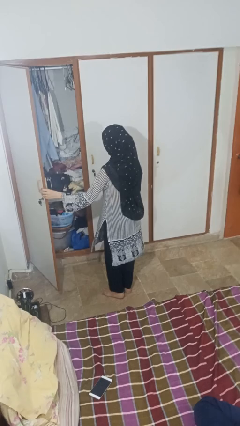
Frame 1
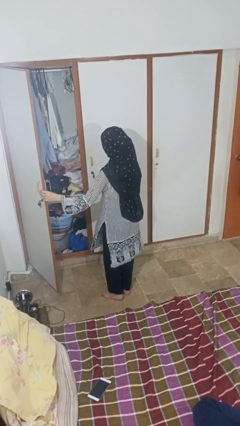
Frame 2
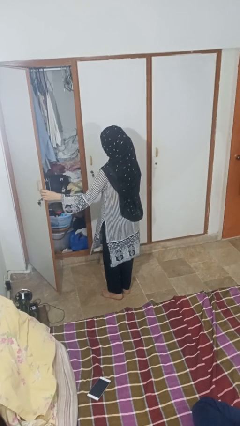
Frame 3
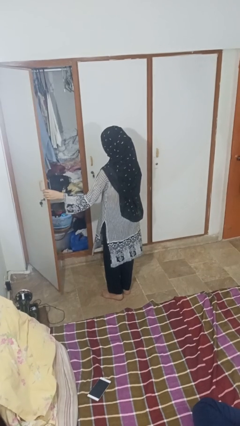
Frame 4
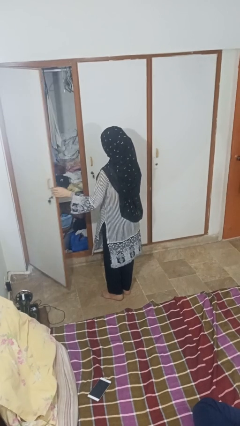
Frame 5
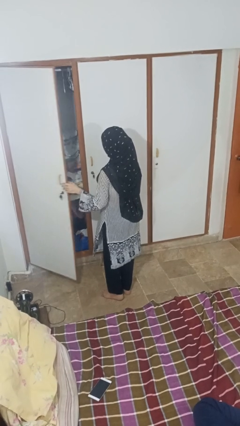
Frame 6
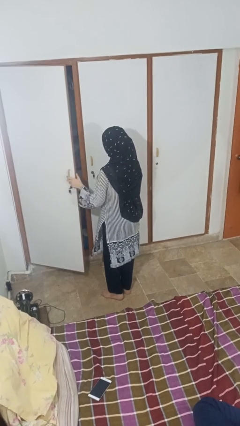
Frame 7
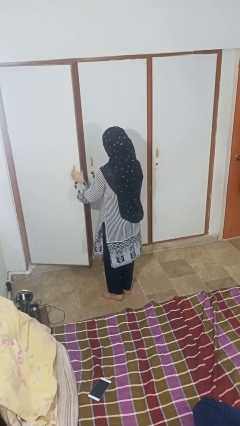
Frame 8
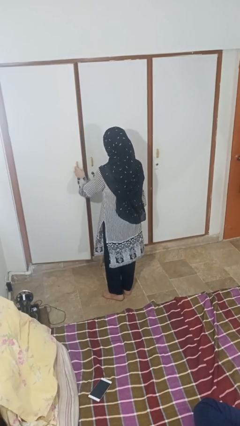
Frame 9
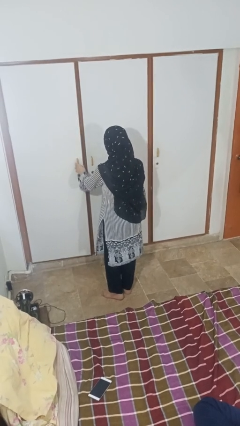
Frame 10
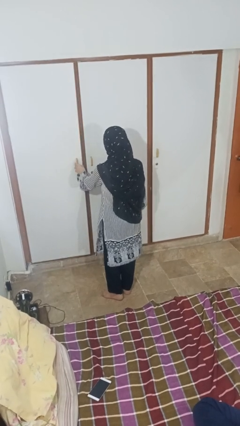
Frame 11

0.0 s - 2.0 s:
person closes closet door

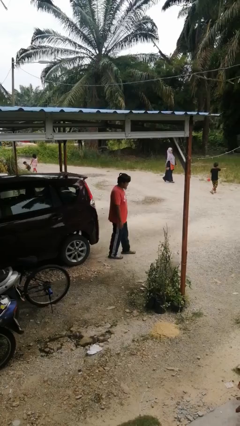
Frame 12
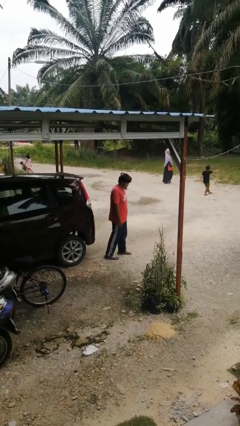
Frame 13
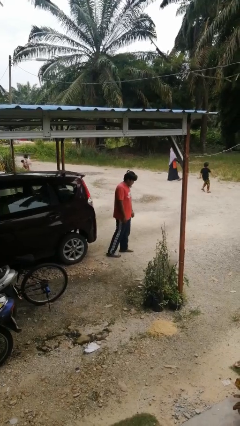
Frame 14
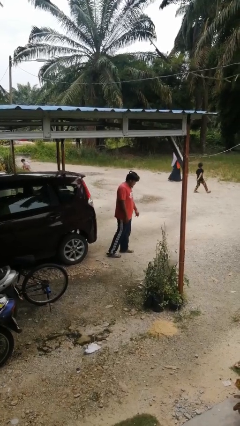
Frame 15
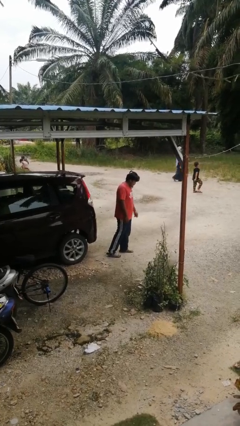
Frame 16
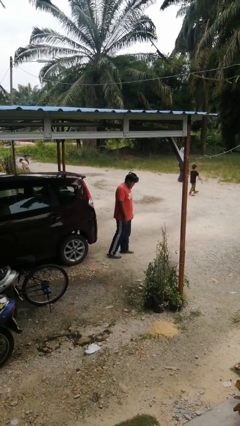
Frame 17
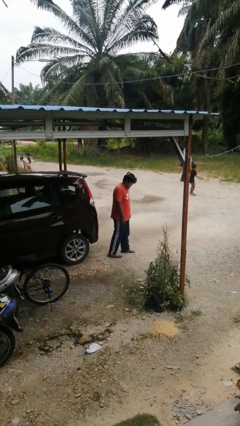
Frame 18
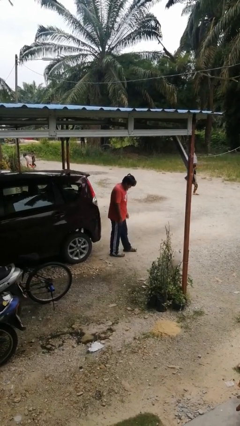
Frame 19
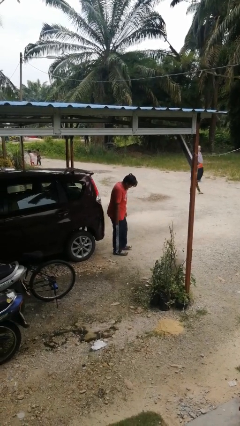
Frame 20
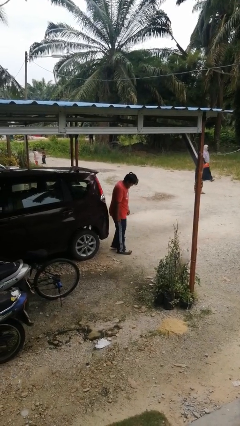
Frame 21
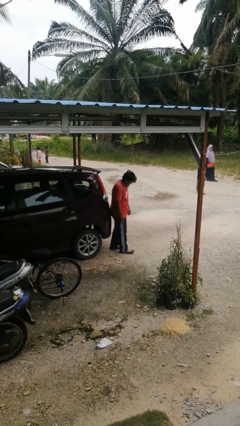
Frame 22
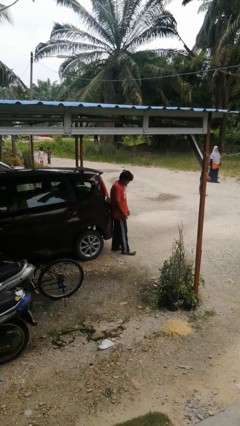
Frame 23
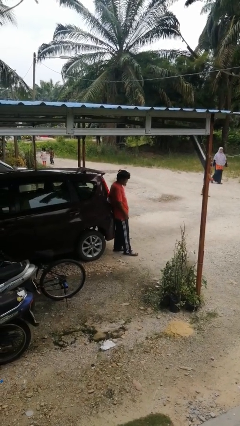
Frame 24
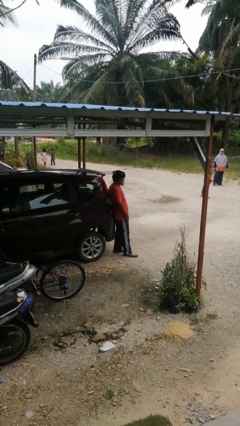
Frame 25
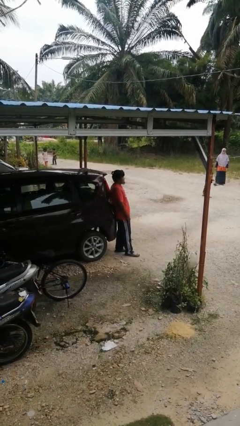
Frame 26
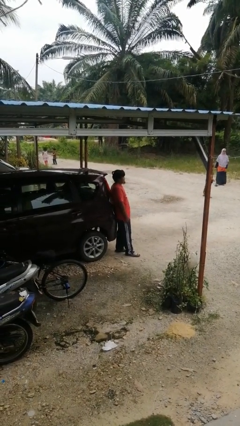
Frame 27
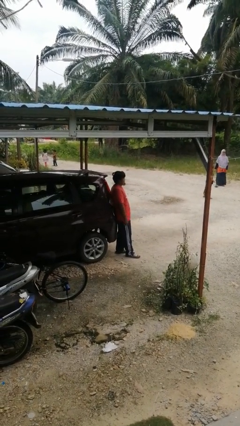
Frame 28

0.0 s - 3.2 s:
person leans against car

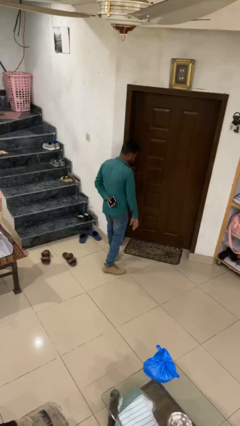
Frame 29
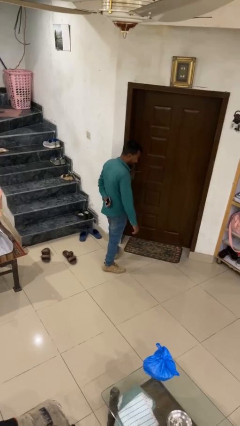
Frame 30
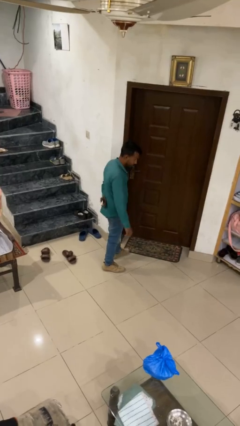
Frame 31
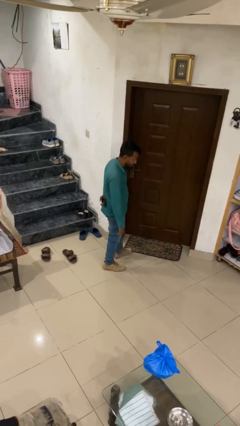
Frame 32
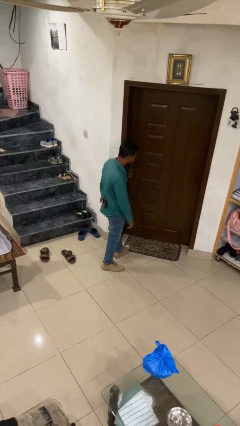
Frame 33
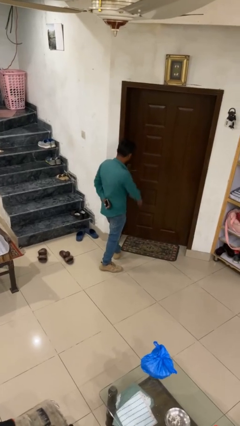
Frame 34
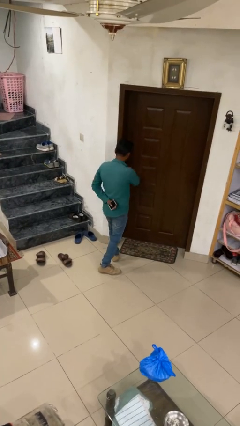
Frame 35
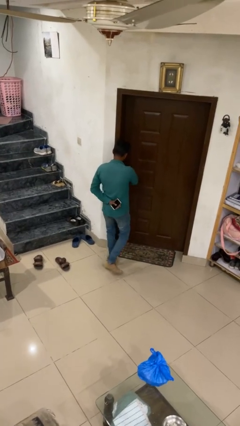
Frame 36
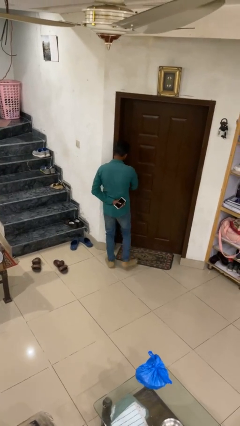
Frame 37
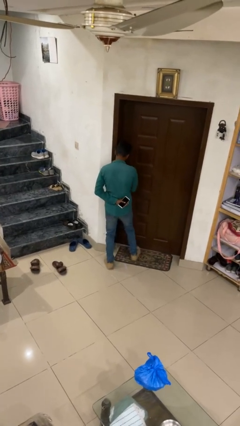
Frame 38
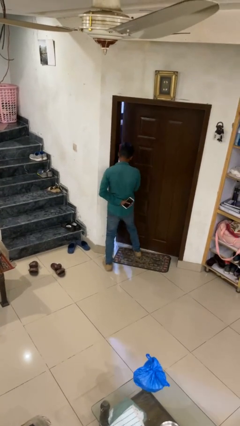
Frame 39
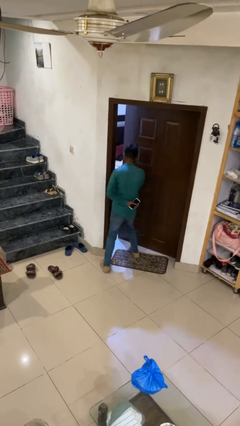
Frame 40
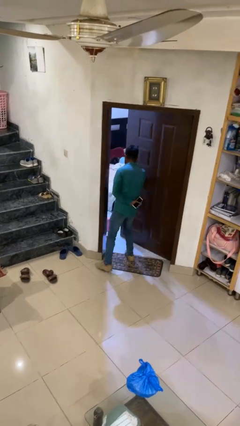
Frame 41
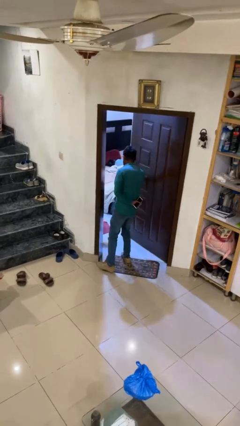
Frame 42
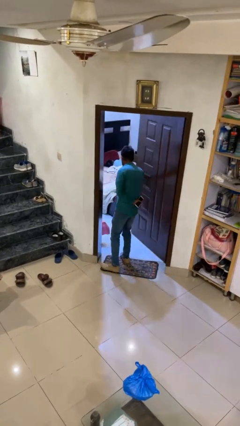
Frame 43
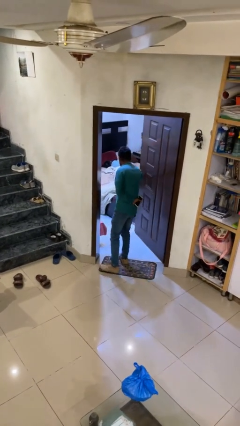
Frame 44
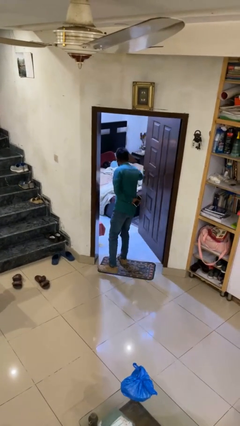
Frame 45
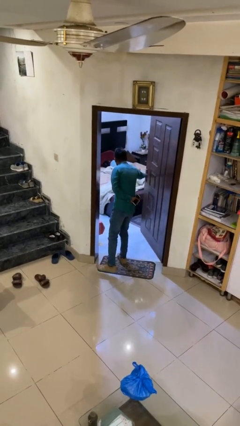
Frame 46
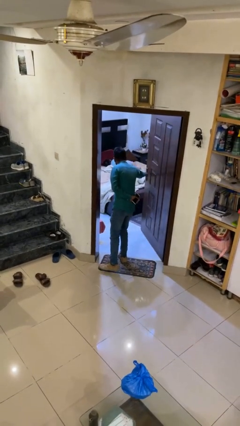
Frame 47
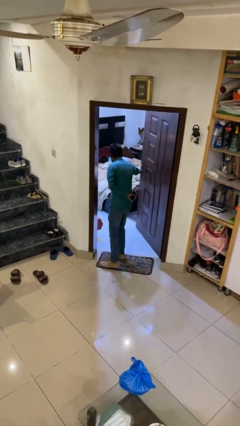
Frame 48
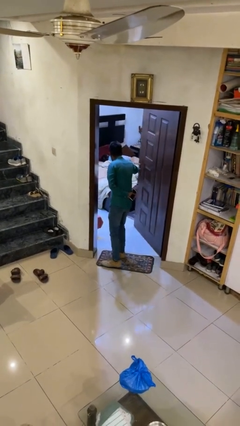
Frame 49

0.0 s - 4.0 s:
person opens facility door

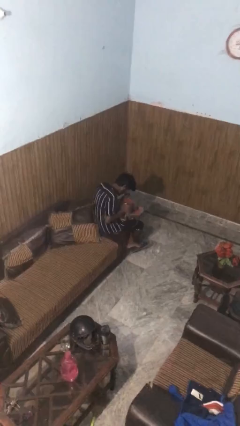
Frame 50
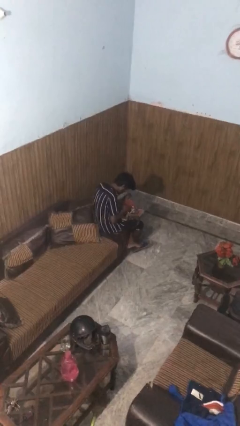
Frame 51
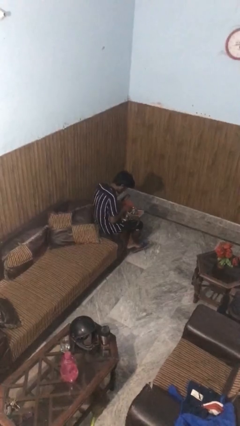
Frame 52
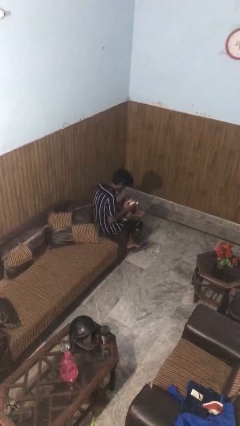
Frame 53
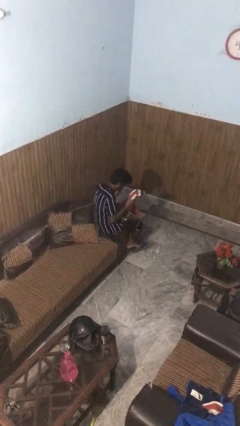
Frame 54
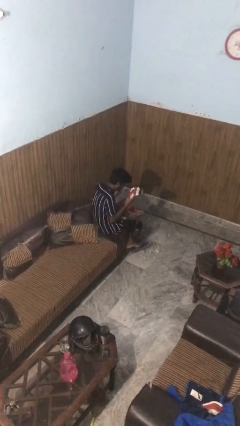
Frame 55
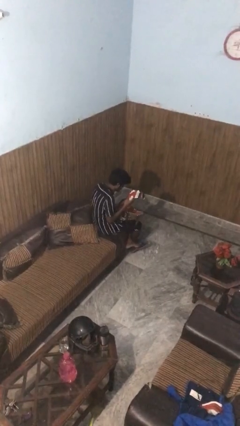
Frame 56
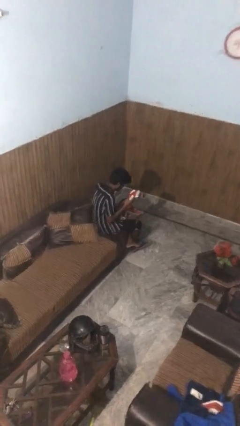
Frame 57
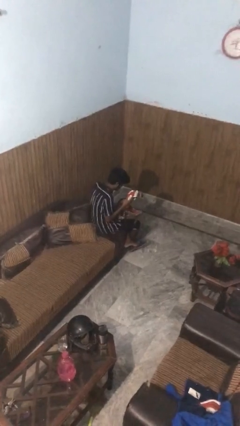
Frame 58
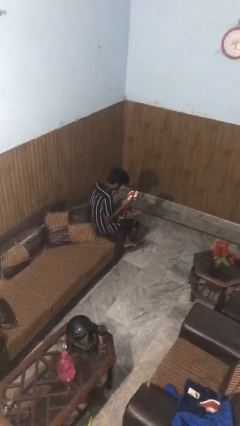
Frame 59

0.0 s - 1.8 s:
person takes object from purse

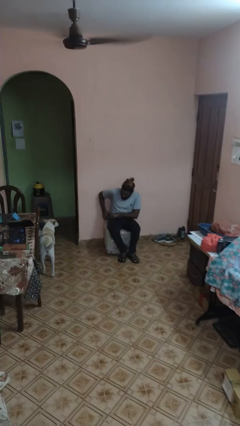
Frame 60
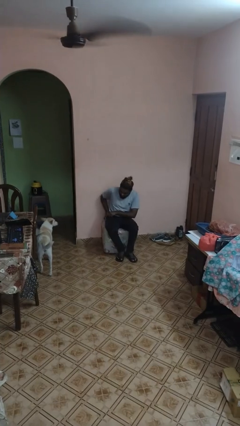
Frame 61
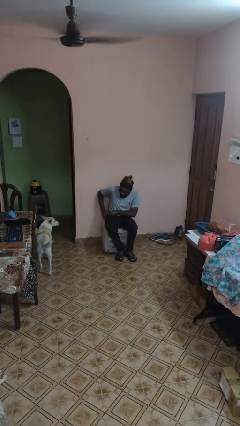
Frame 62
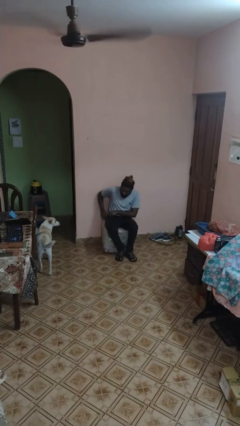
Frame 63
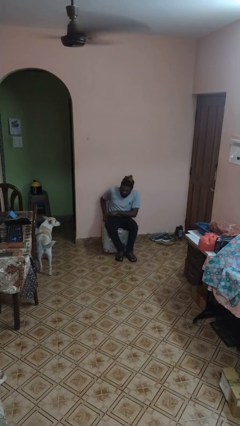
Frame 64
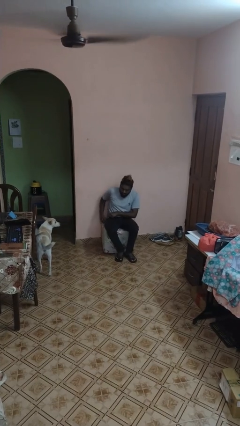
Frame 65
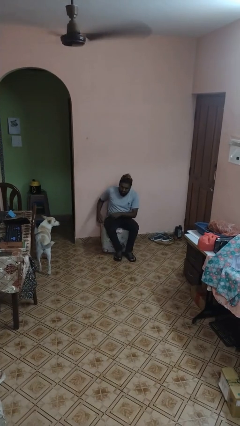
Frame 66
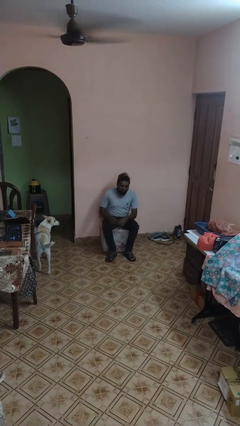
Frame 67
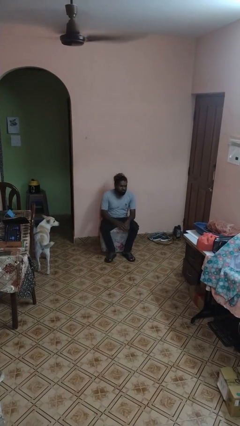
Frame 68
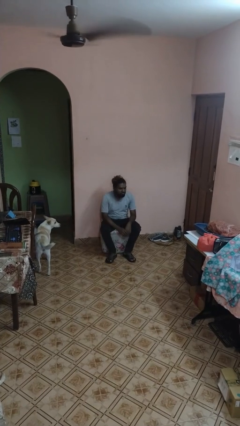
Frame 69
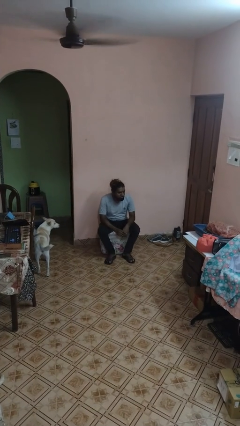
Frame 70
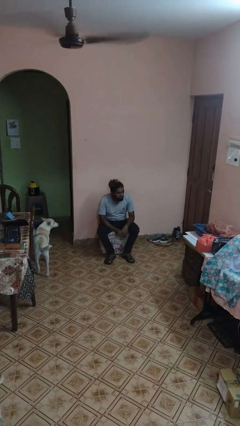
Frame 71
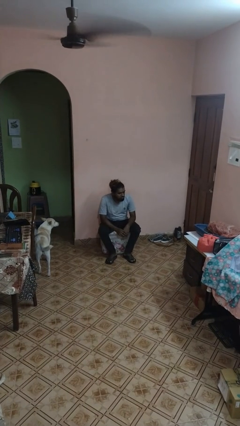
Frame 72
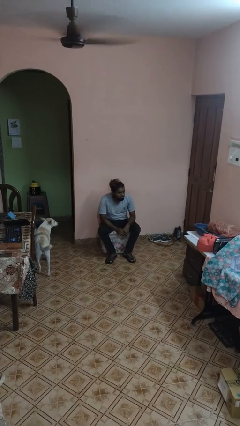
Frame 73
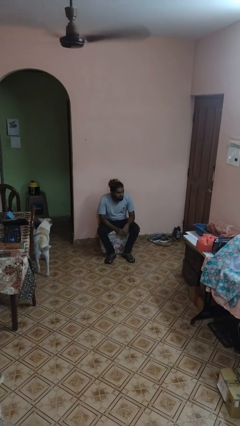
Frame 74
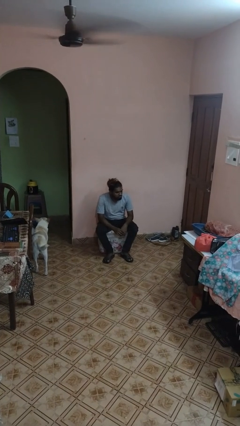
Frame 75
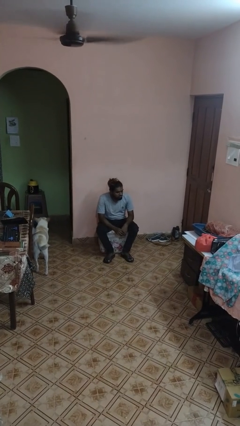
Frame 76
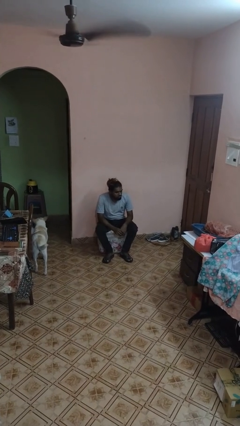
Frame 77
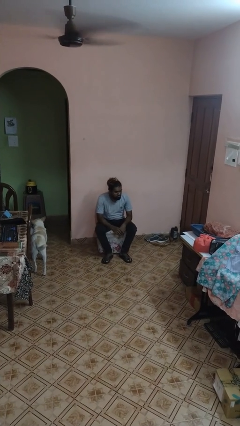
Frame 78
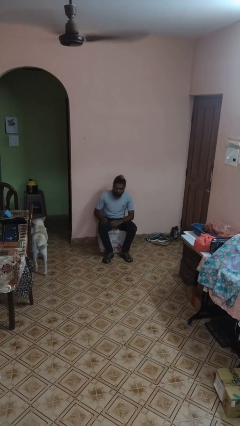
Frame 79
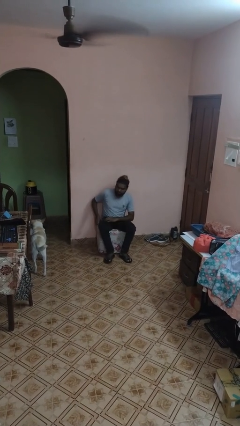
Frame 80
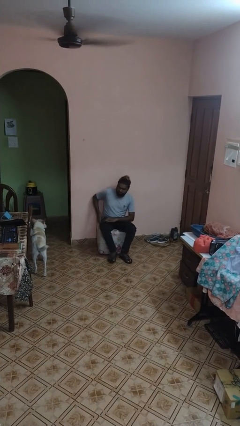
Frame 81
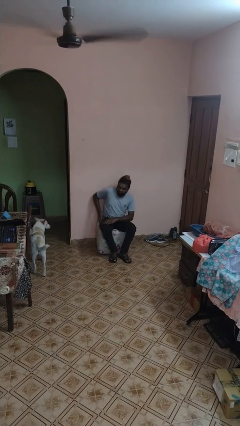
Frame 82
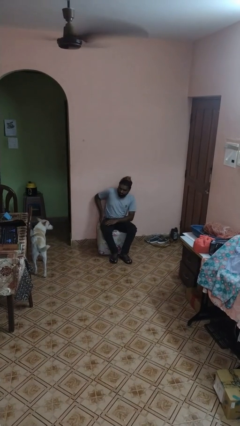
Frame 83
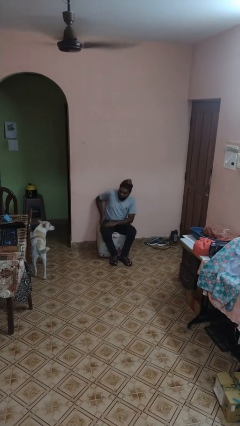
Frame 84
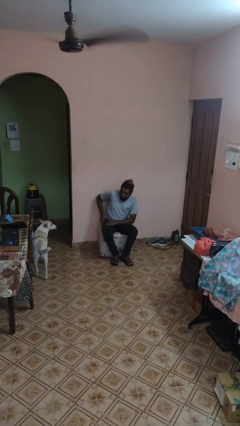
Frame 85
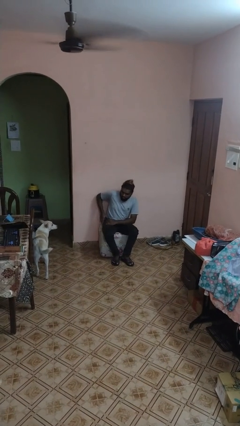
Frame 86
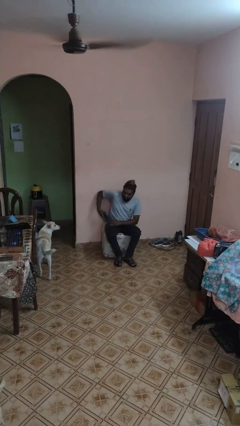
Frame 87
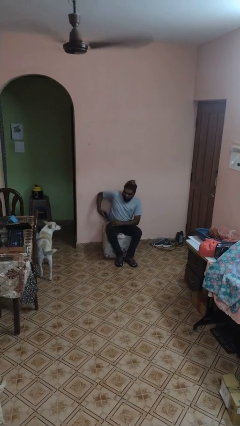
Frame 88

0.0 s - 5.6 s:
person puts phone into pocket

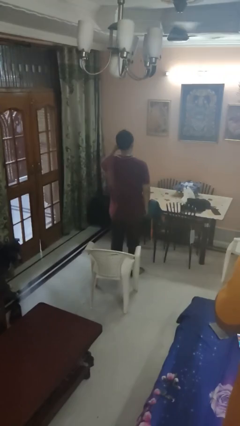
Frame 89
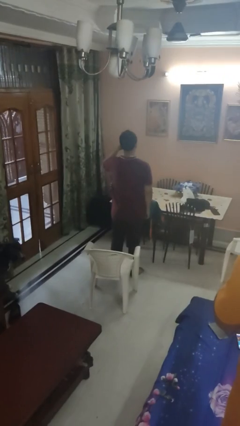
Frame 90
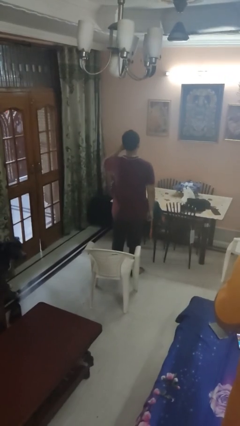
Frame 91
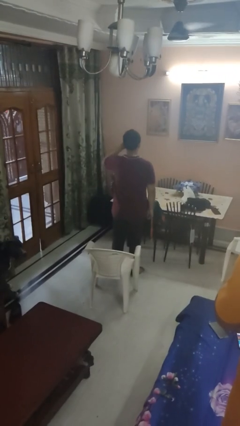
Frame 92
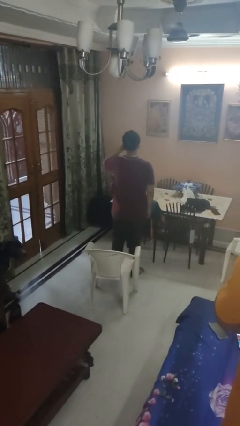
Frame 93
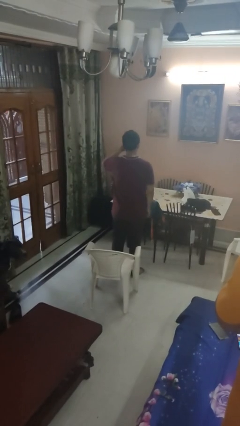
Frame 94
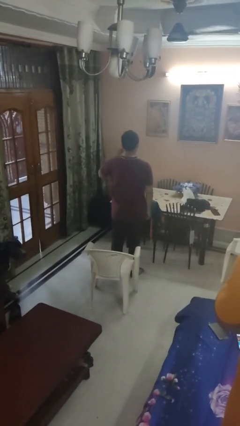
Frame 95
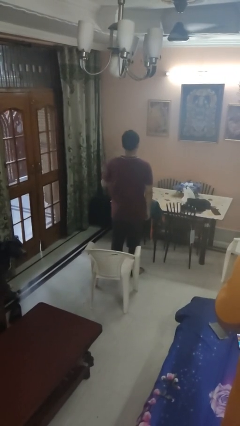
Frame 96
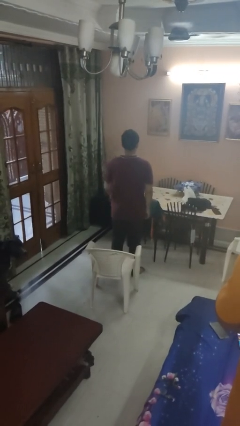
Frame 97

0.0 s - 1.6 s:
person rubs eyes
